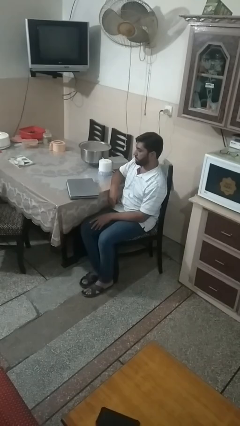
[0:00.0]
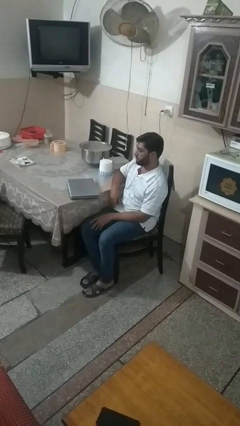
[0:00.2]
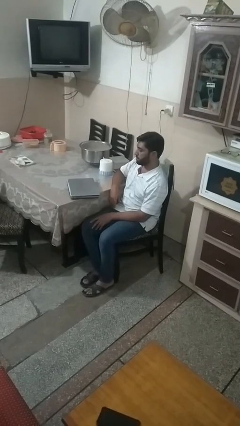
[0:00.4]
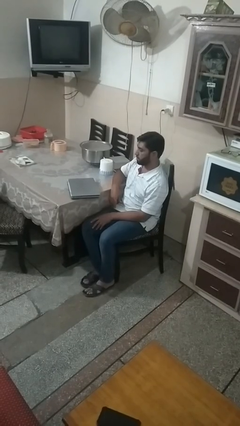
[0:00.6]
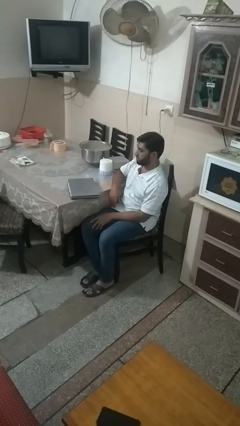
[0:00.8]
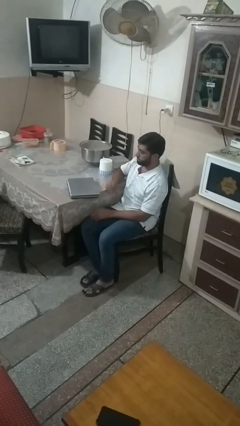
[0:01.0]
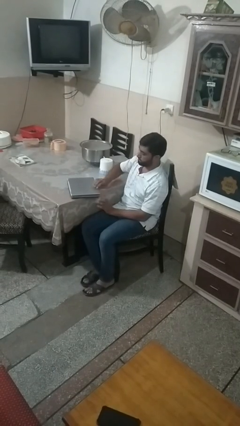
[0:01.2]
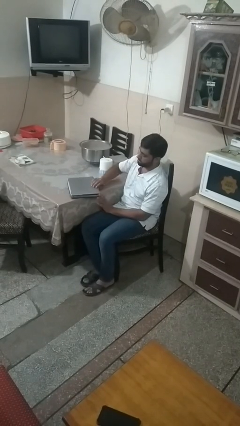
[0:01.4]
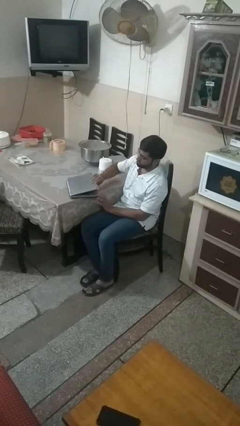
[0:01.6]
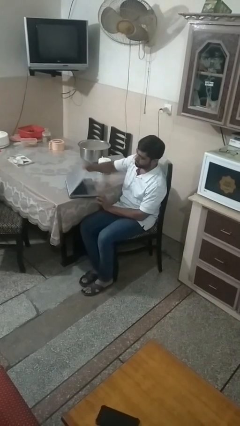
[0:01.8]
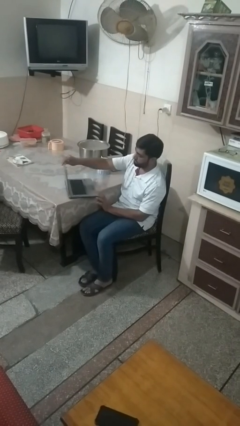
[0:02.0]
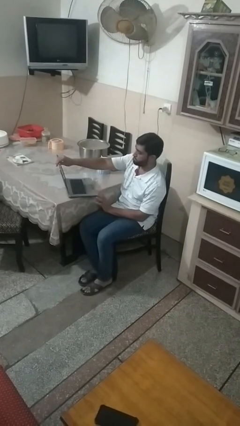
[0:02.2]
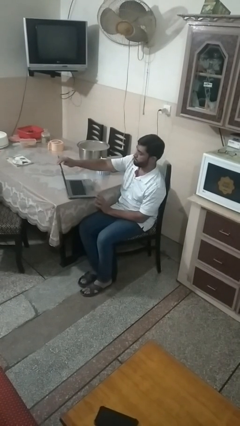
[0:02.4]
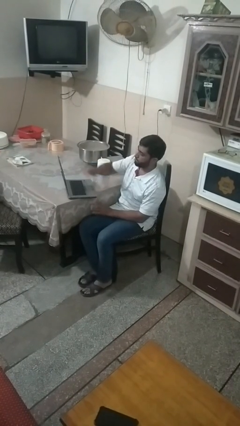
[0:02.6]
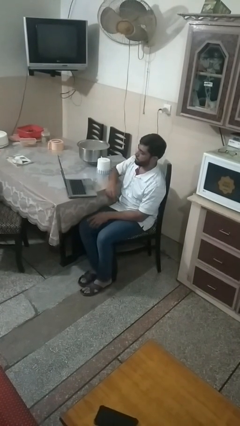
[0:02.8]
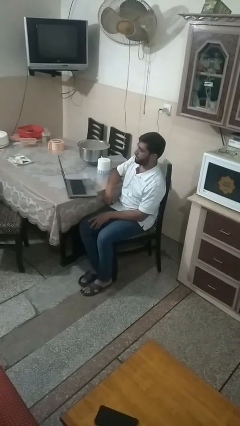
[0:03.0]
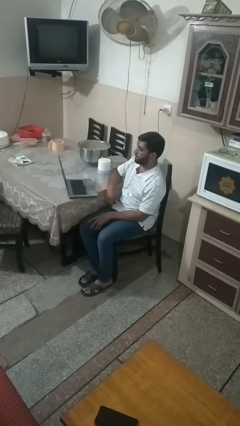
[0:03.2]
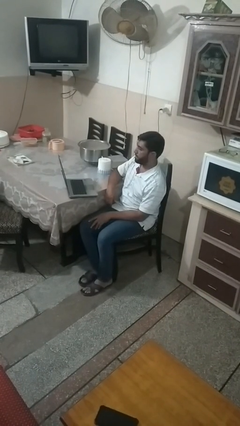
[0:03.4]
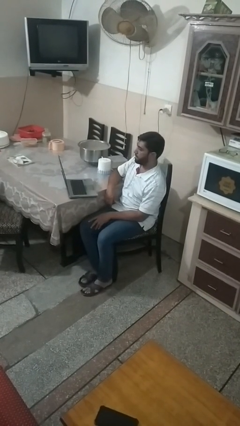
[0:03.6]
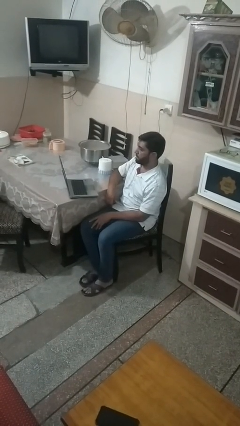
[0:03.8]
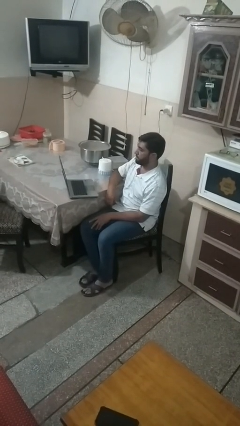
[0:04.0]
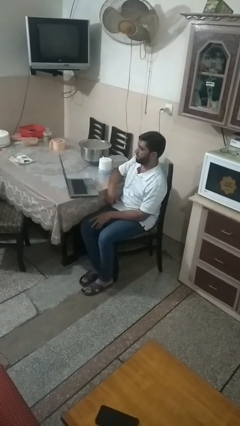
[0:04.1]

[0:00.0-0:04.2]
person opens laptop

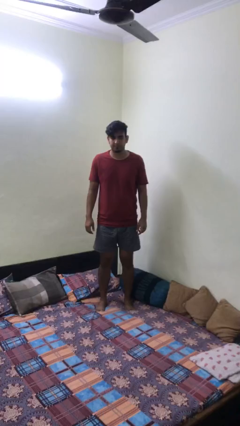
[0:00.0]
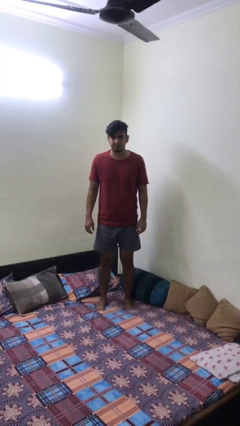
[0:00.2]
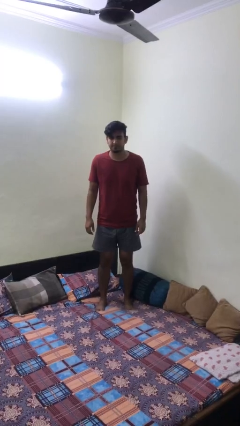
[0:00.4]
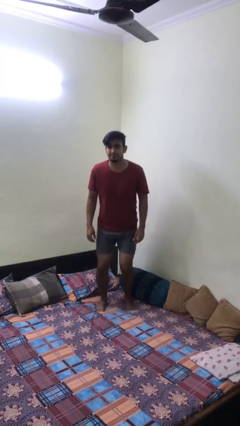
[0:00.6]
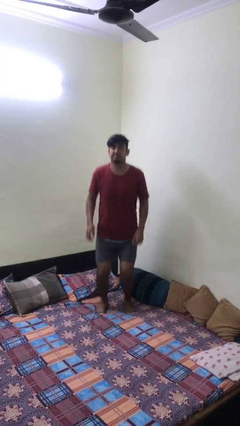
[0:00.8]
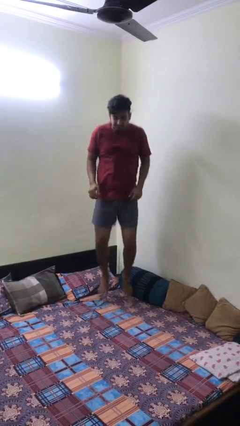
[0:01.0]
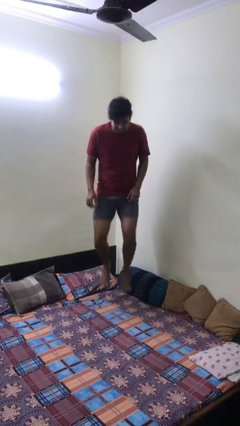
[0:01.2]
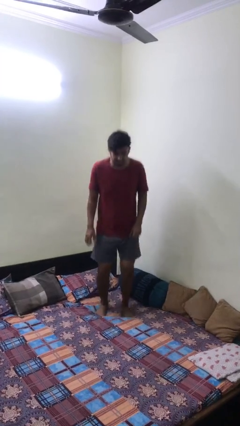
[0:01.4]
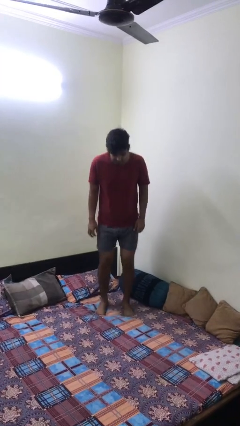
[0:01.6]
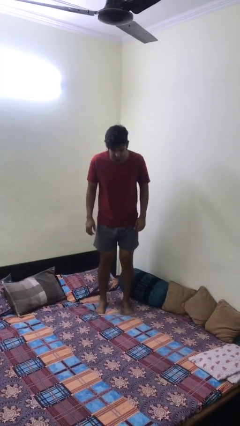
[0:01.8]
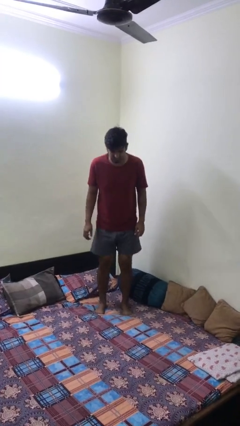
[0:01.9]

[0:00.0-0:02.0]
person jumps on bed

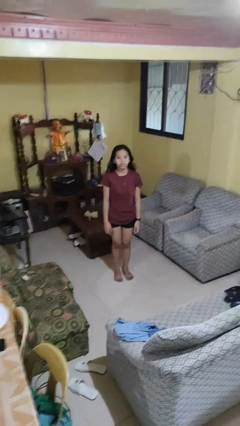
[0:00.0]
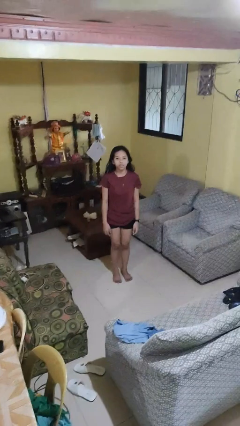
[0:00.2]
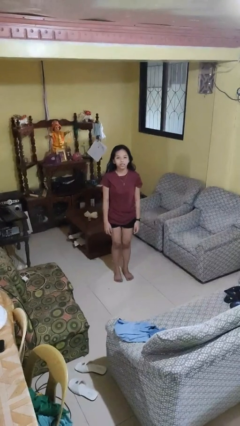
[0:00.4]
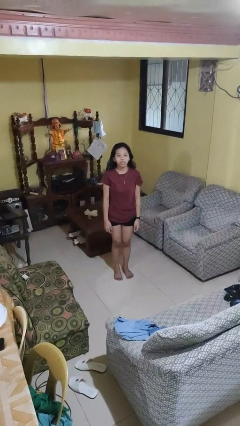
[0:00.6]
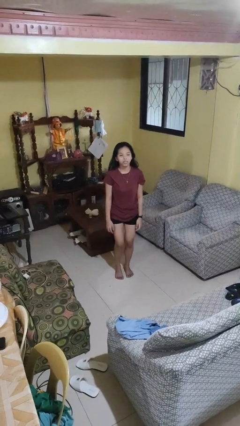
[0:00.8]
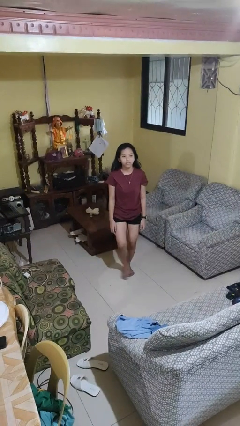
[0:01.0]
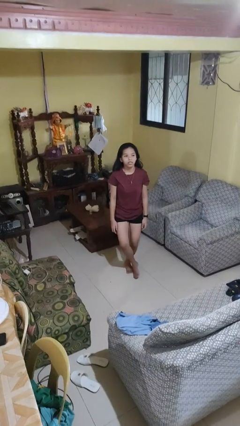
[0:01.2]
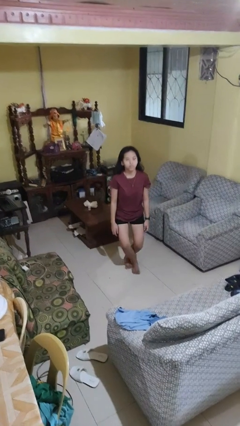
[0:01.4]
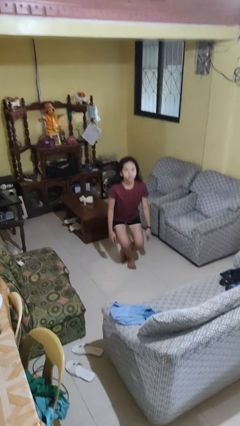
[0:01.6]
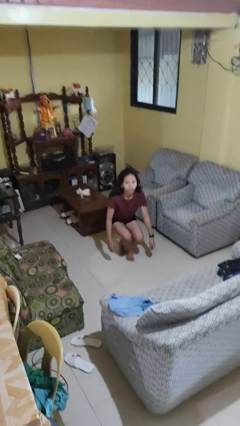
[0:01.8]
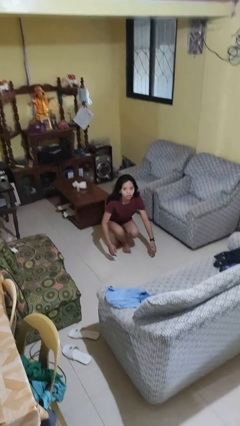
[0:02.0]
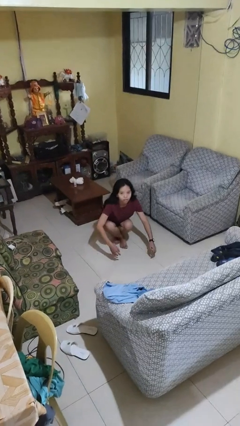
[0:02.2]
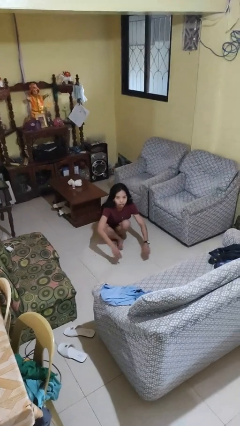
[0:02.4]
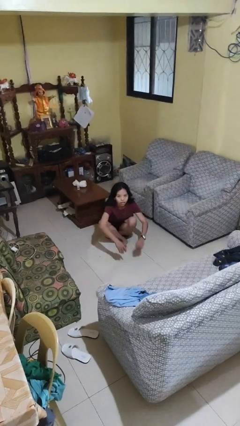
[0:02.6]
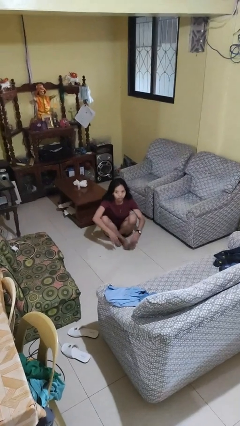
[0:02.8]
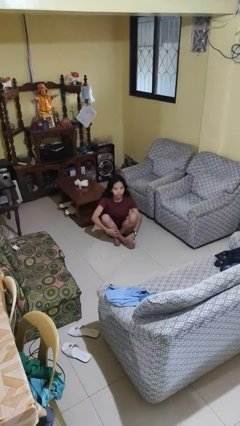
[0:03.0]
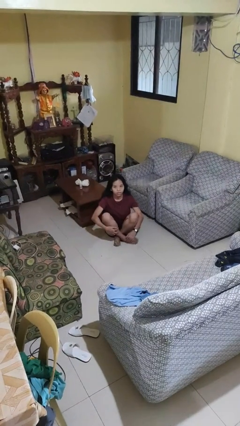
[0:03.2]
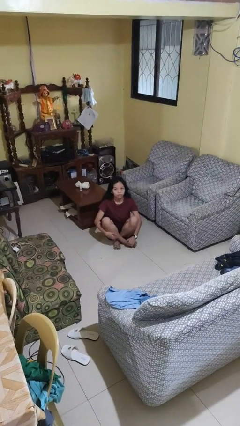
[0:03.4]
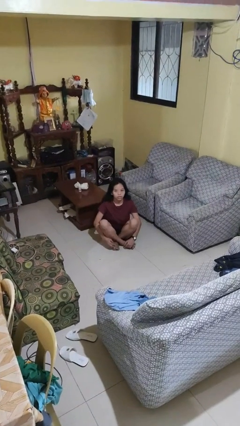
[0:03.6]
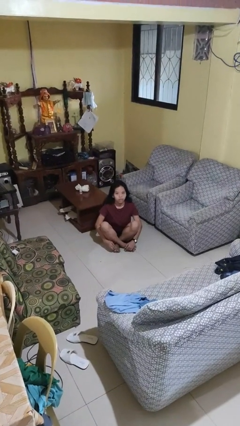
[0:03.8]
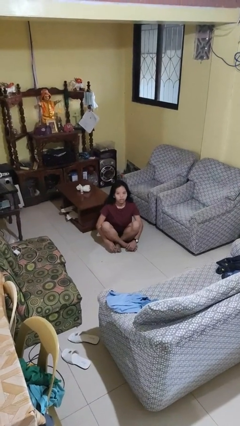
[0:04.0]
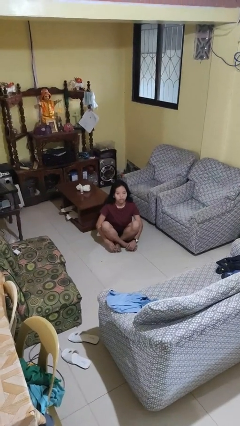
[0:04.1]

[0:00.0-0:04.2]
person sits crisscross

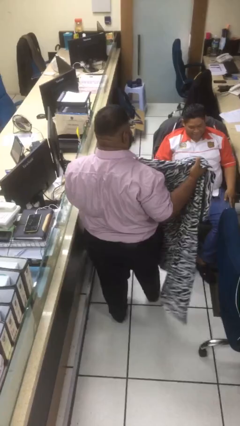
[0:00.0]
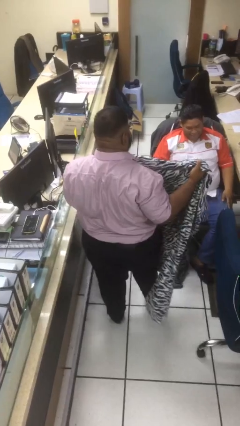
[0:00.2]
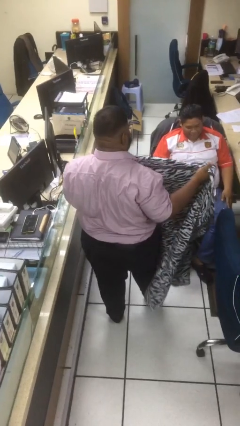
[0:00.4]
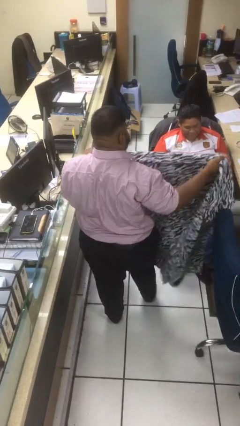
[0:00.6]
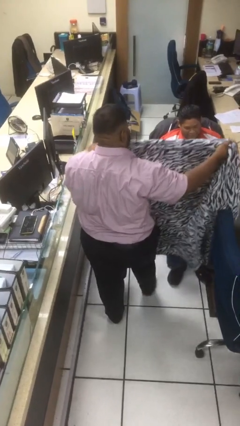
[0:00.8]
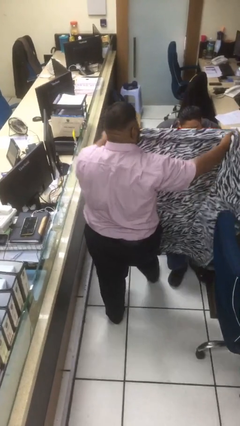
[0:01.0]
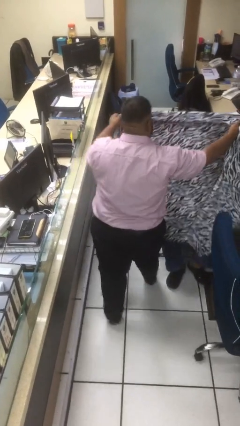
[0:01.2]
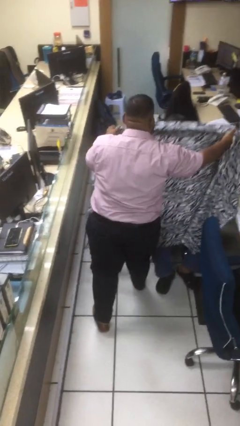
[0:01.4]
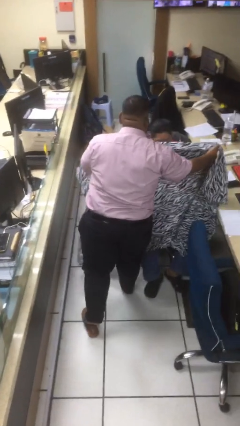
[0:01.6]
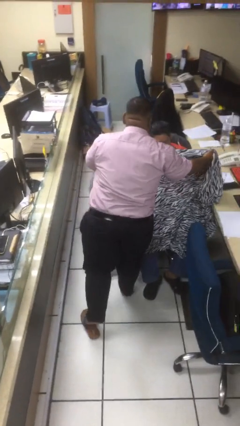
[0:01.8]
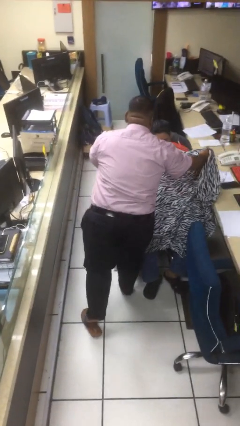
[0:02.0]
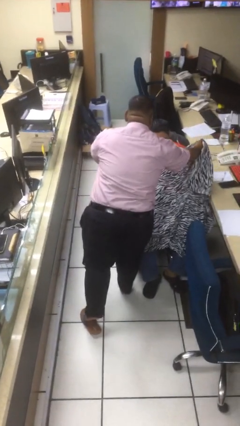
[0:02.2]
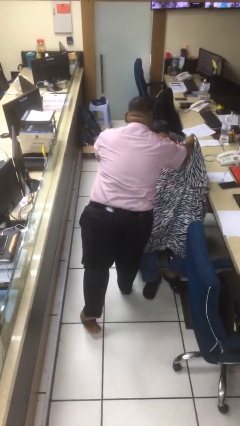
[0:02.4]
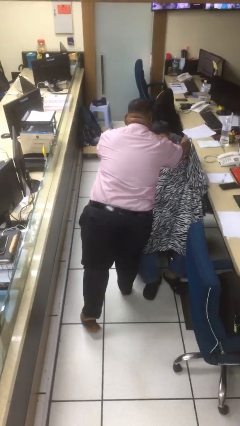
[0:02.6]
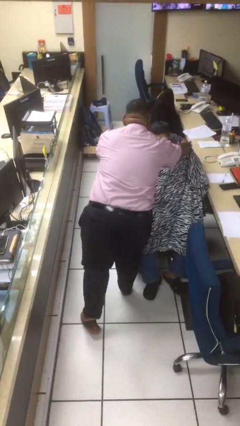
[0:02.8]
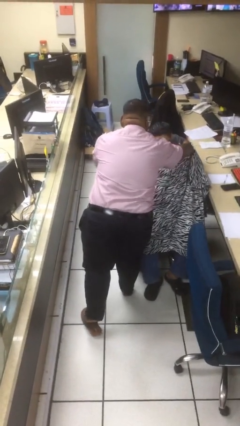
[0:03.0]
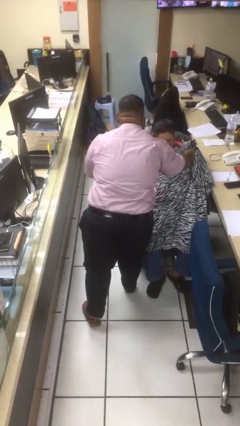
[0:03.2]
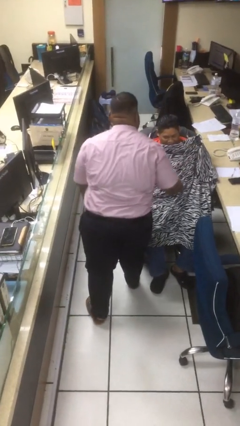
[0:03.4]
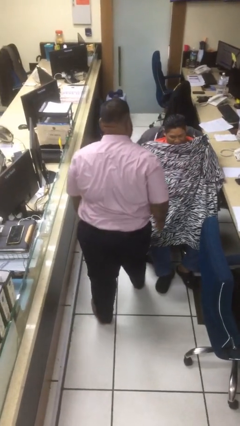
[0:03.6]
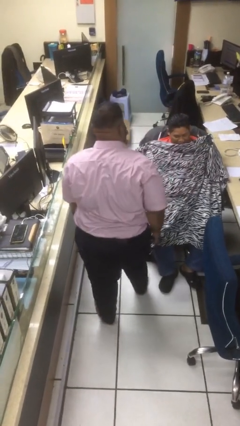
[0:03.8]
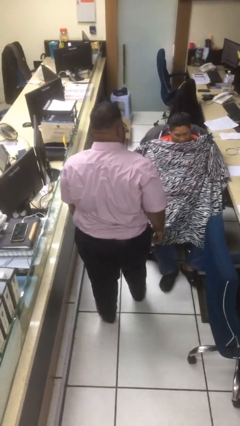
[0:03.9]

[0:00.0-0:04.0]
person covers friend with blanket

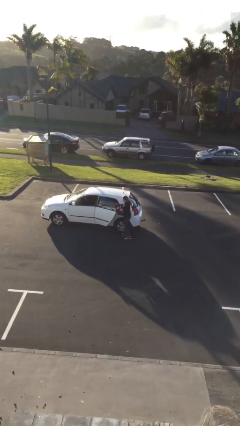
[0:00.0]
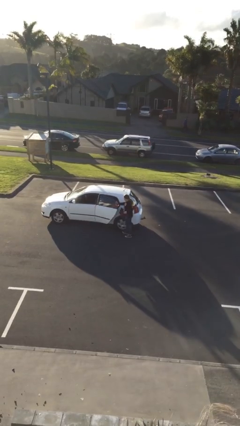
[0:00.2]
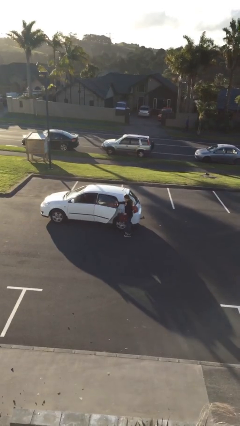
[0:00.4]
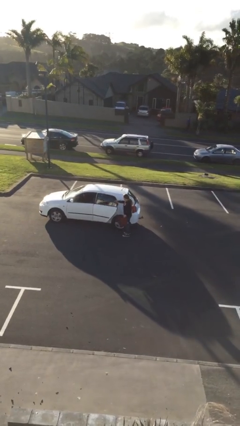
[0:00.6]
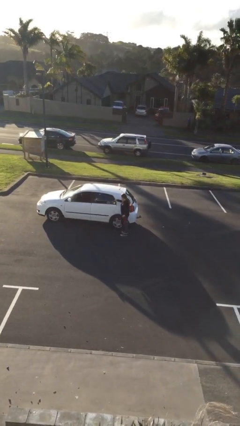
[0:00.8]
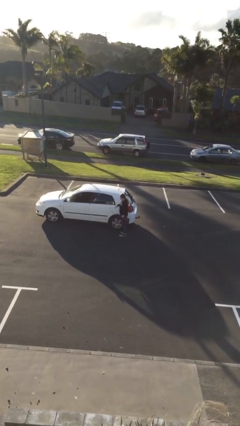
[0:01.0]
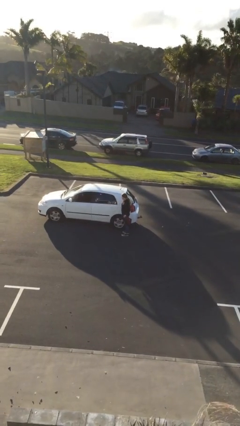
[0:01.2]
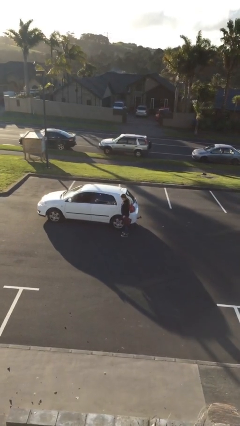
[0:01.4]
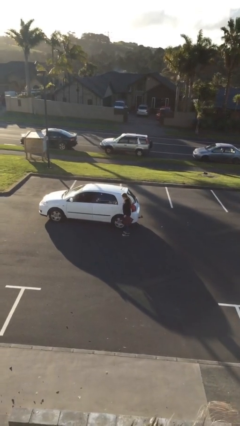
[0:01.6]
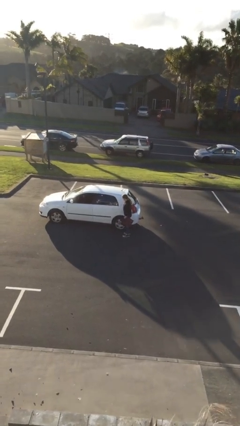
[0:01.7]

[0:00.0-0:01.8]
person closes car door

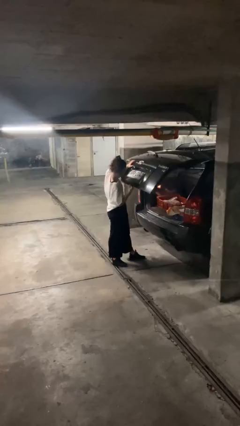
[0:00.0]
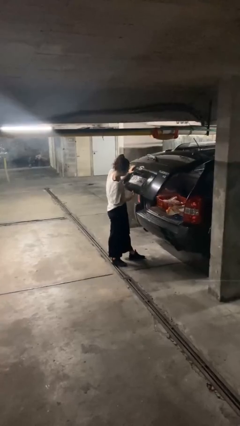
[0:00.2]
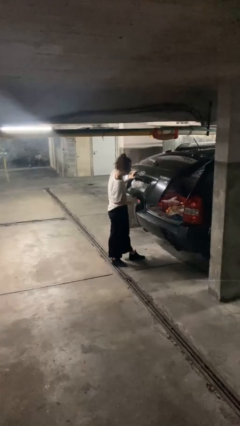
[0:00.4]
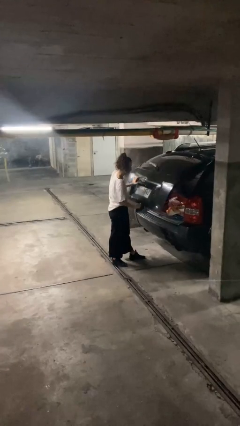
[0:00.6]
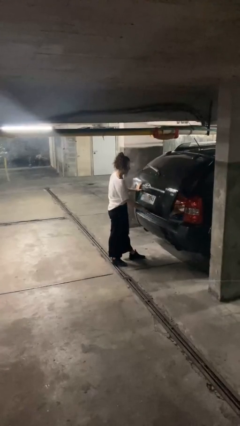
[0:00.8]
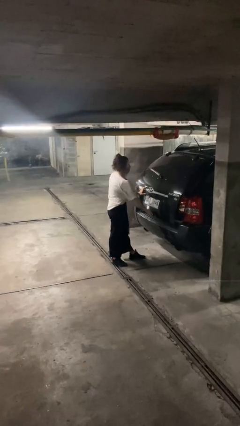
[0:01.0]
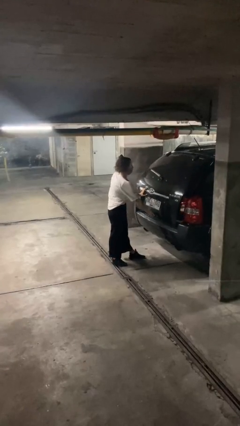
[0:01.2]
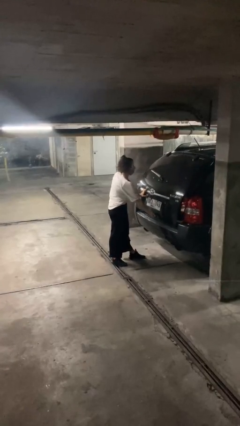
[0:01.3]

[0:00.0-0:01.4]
person closes car trunk
